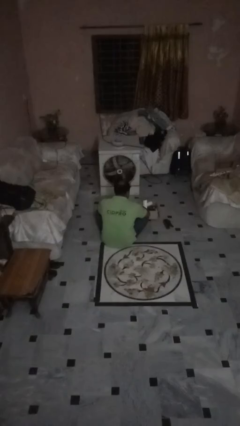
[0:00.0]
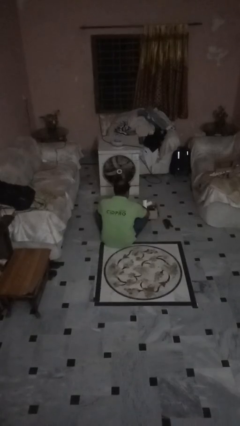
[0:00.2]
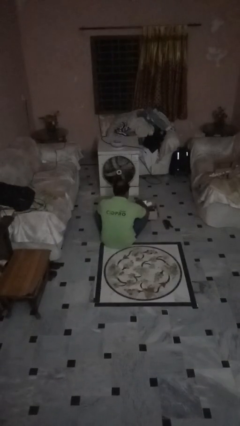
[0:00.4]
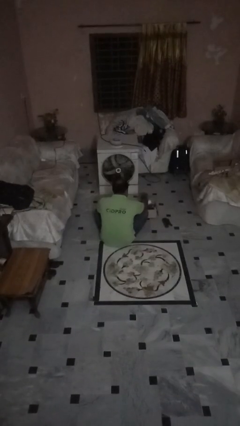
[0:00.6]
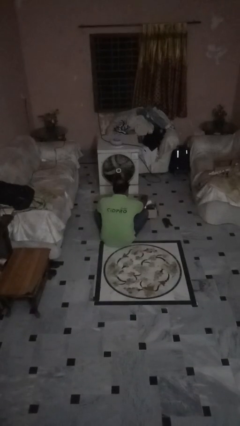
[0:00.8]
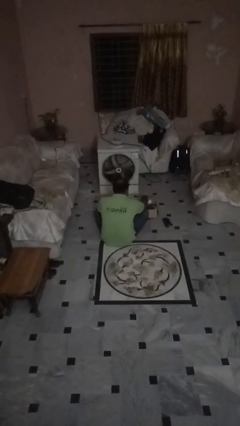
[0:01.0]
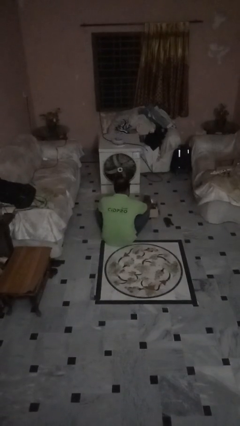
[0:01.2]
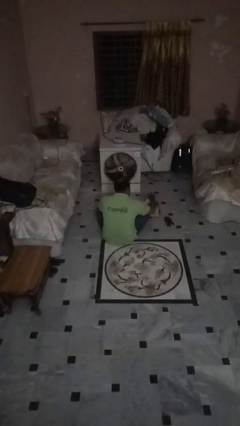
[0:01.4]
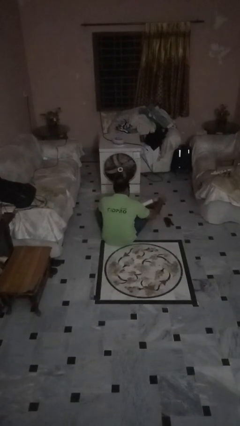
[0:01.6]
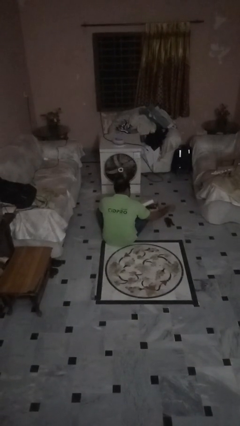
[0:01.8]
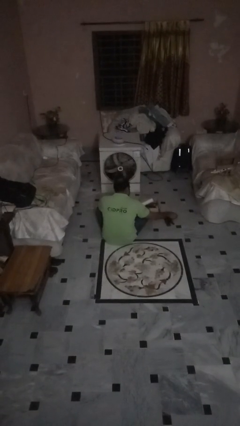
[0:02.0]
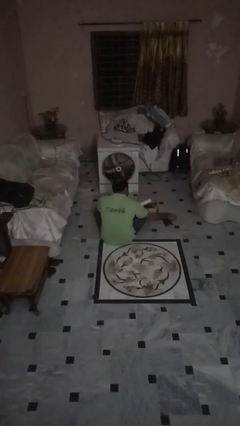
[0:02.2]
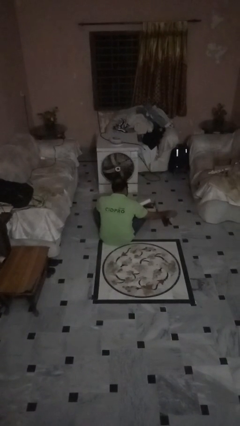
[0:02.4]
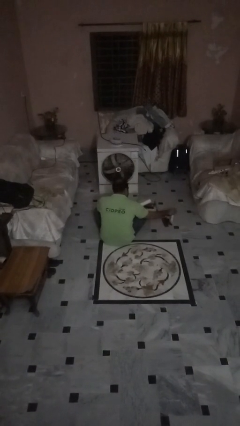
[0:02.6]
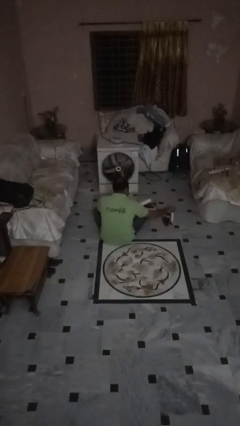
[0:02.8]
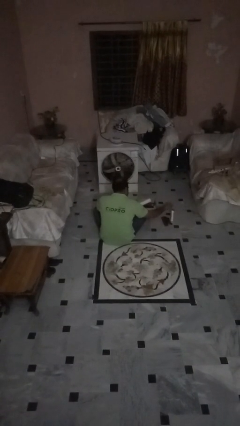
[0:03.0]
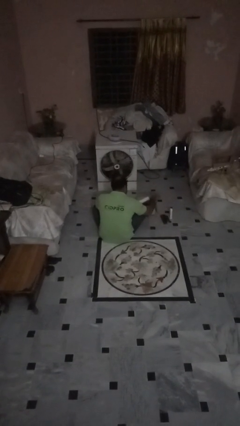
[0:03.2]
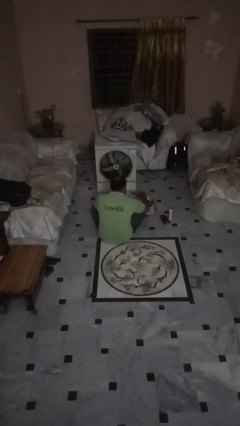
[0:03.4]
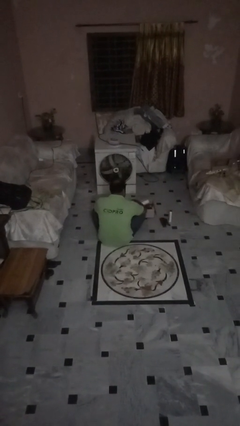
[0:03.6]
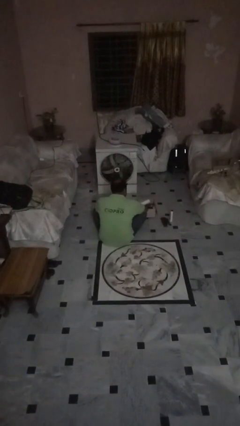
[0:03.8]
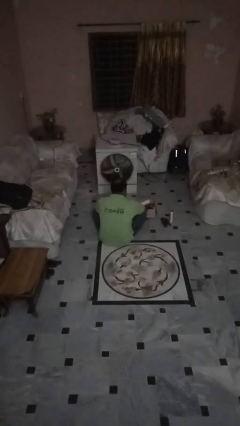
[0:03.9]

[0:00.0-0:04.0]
person unloads box onto floor

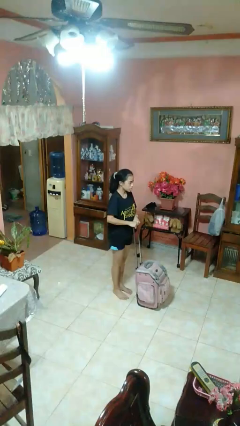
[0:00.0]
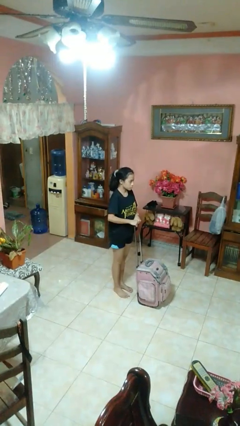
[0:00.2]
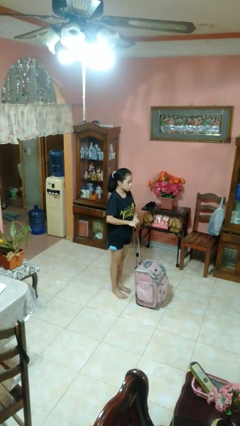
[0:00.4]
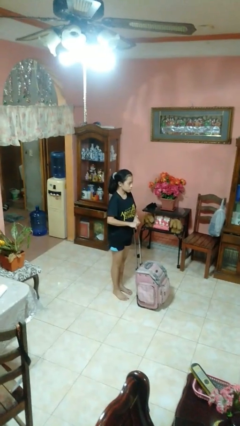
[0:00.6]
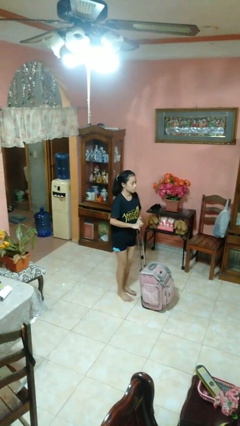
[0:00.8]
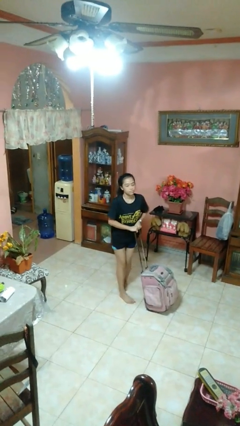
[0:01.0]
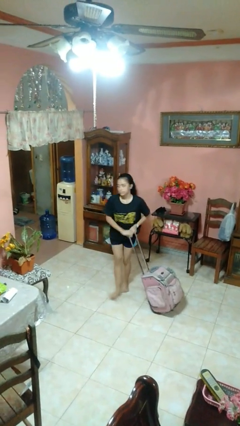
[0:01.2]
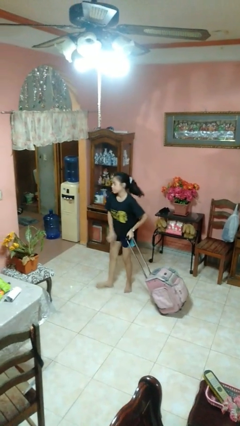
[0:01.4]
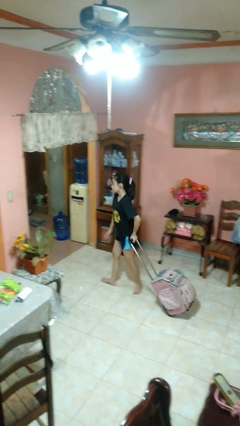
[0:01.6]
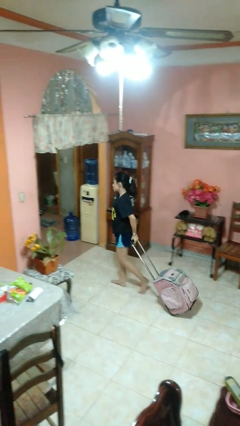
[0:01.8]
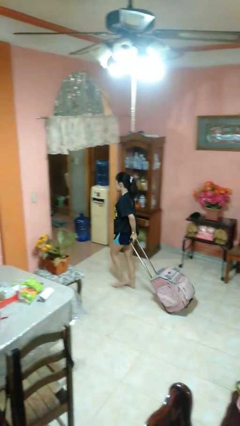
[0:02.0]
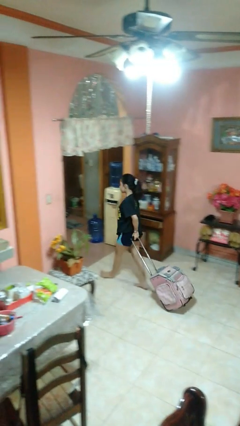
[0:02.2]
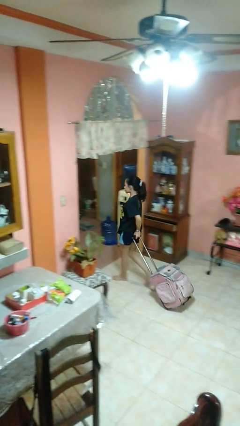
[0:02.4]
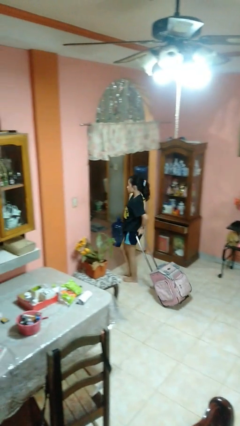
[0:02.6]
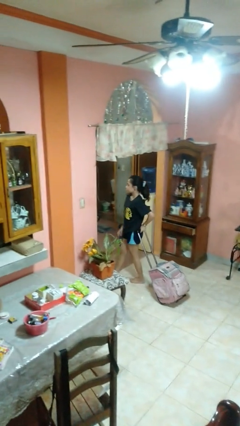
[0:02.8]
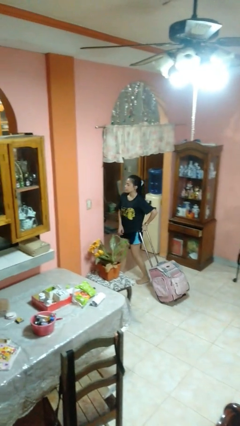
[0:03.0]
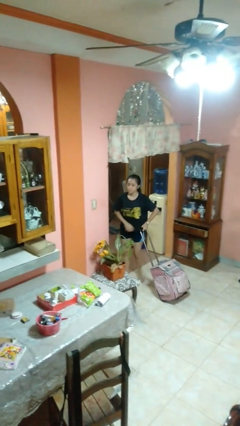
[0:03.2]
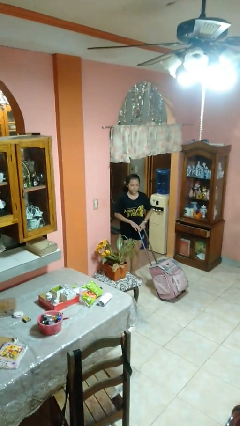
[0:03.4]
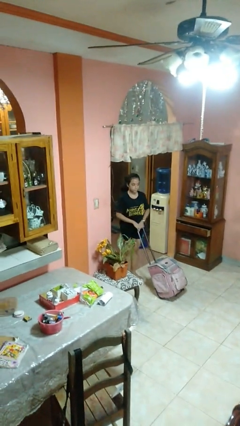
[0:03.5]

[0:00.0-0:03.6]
person pulls wheeled cart

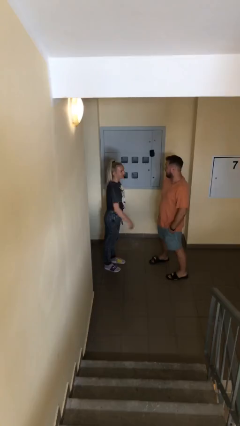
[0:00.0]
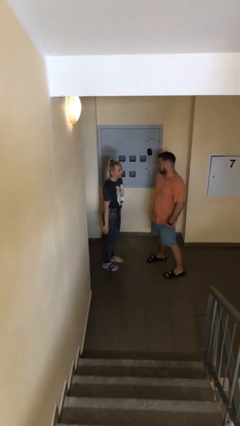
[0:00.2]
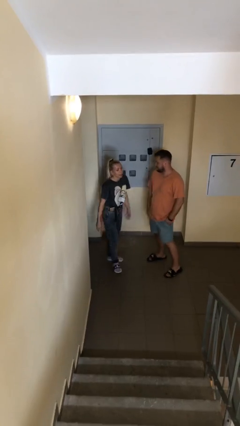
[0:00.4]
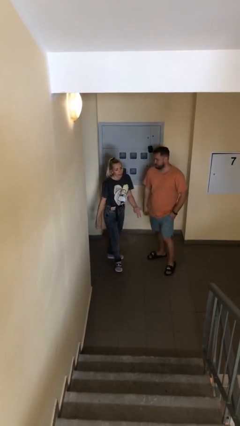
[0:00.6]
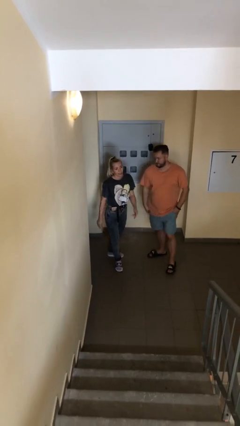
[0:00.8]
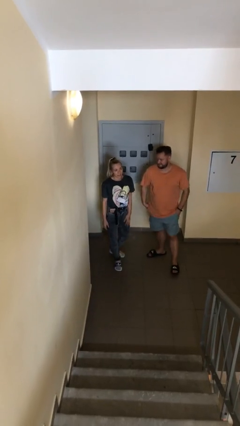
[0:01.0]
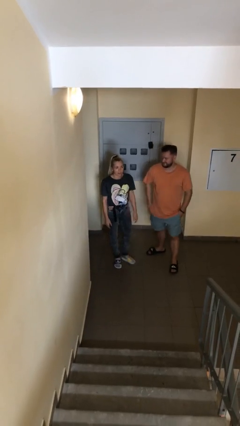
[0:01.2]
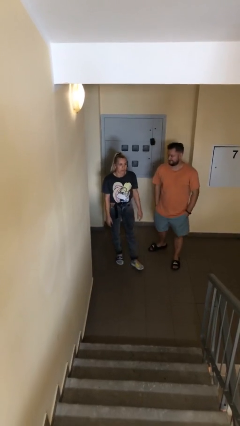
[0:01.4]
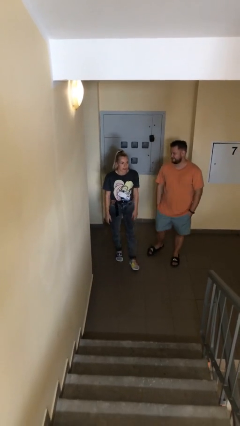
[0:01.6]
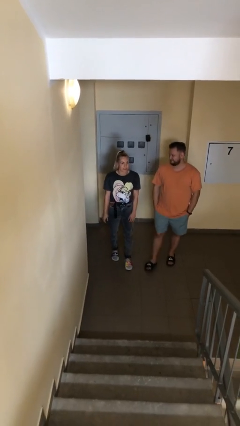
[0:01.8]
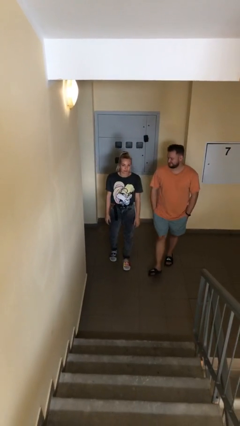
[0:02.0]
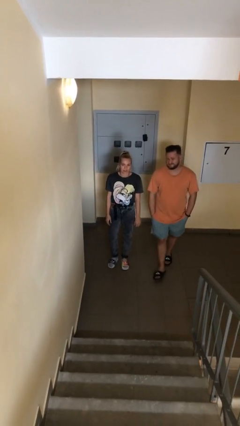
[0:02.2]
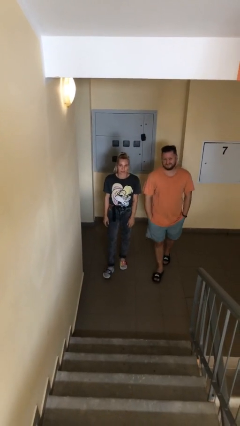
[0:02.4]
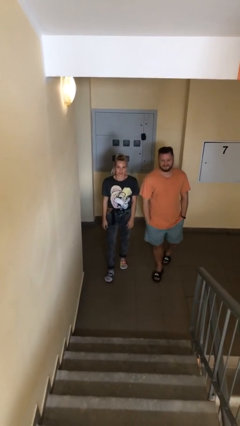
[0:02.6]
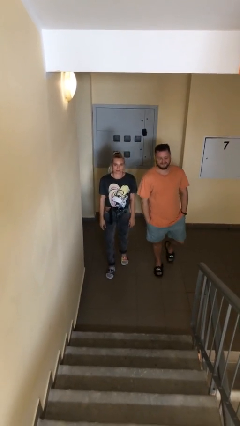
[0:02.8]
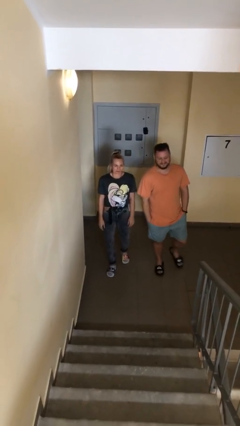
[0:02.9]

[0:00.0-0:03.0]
person talks to person

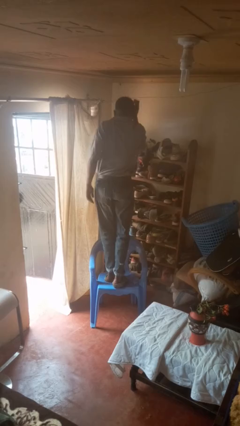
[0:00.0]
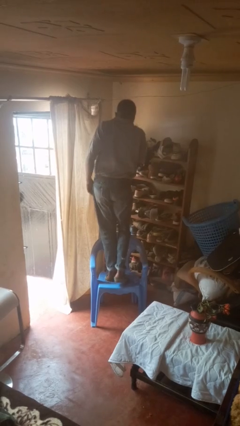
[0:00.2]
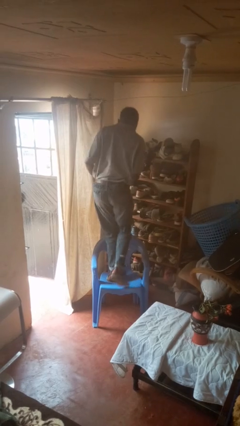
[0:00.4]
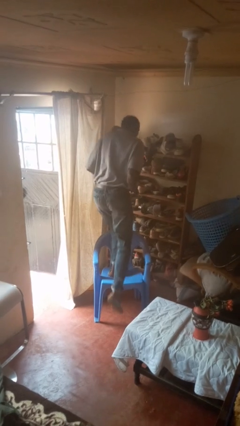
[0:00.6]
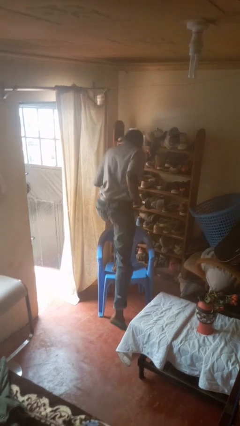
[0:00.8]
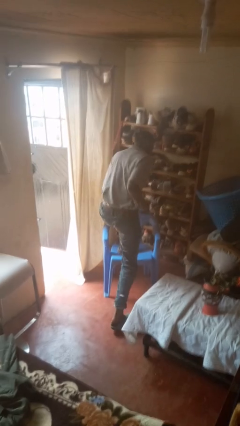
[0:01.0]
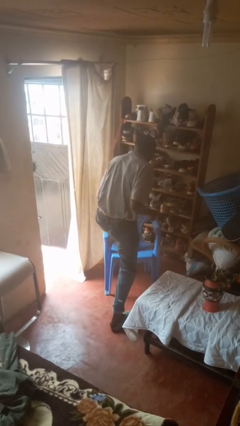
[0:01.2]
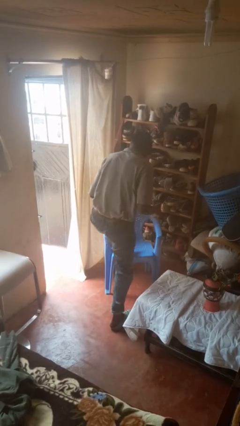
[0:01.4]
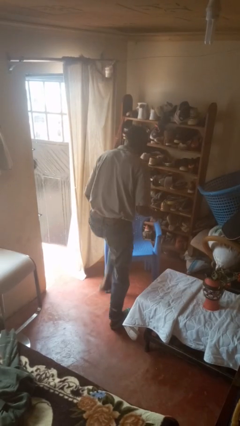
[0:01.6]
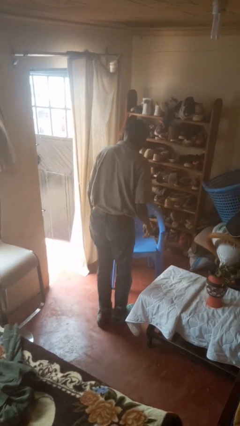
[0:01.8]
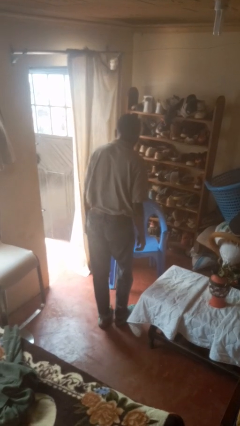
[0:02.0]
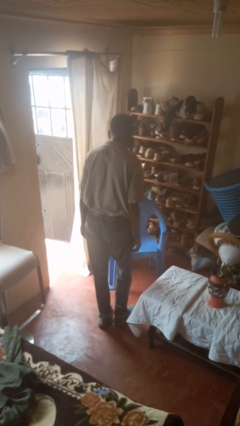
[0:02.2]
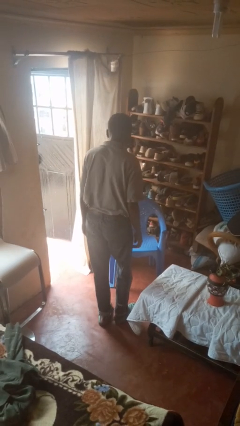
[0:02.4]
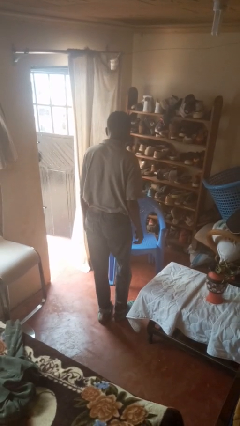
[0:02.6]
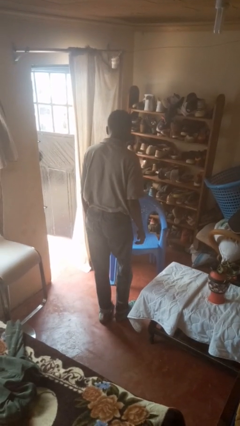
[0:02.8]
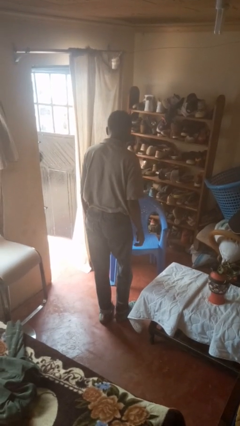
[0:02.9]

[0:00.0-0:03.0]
person climbs off chair

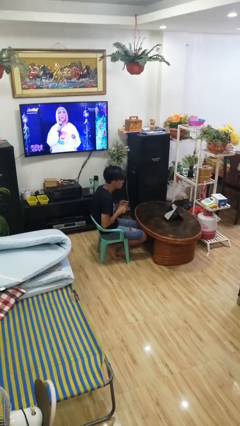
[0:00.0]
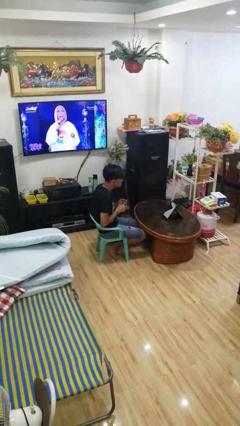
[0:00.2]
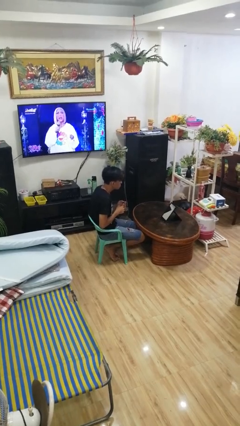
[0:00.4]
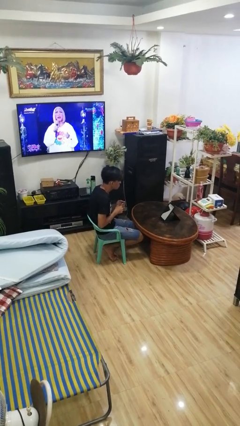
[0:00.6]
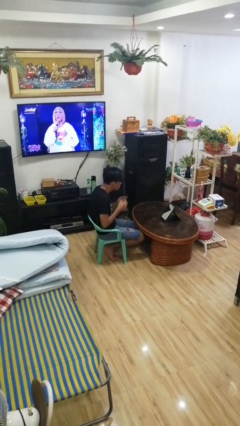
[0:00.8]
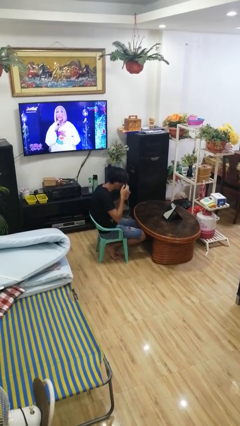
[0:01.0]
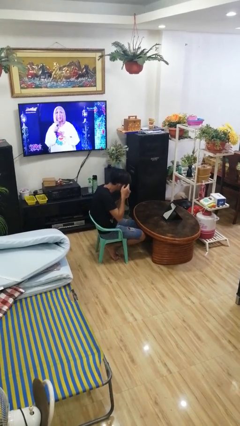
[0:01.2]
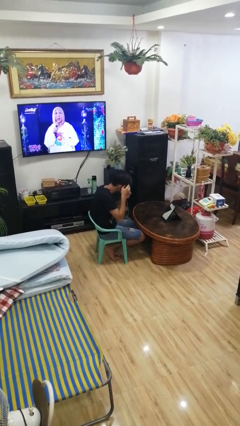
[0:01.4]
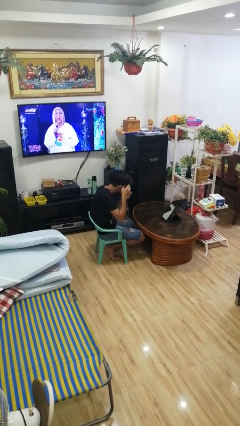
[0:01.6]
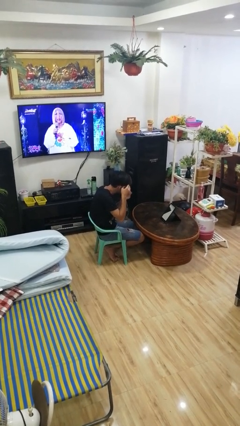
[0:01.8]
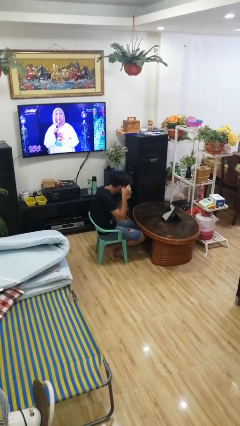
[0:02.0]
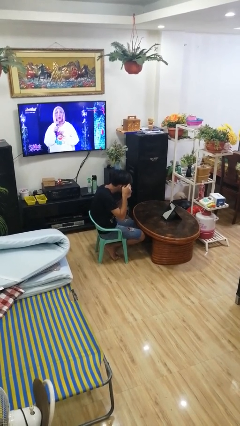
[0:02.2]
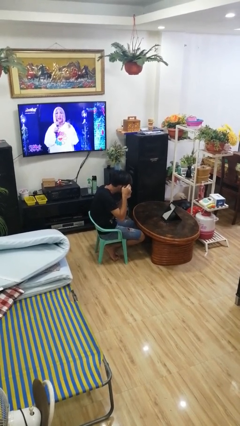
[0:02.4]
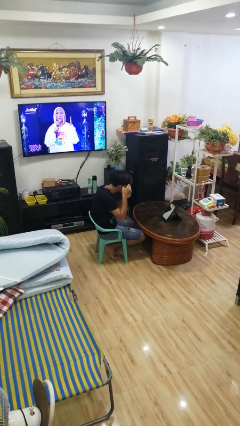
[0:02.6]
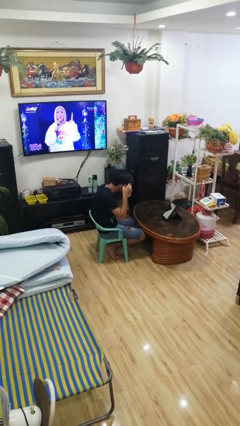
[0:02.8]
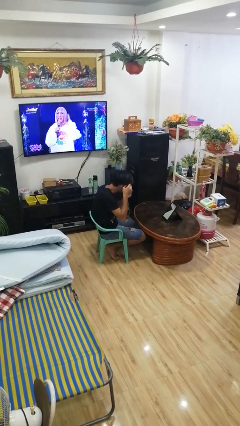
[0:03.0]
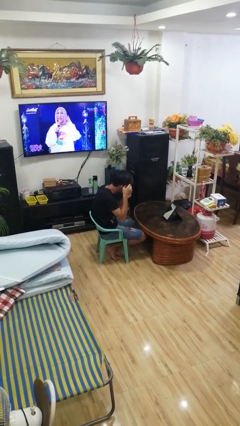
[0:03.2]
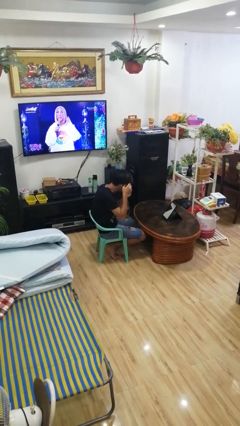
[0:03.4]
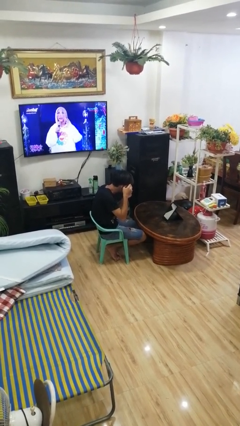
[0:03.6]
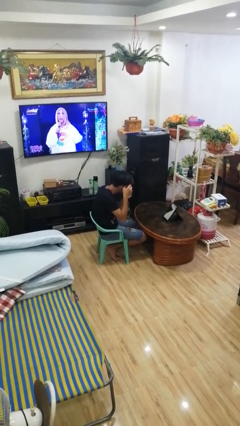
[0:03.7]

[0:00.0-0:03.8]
person applies eye makeup

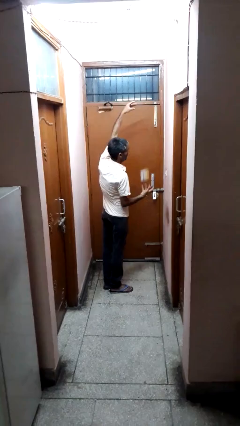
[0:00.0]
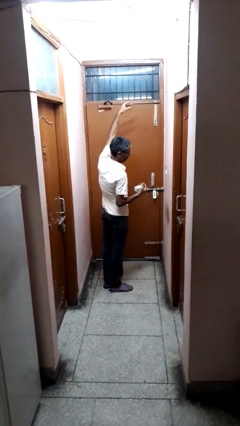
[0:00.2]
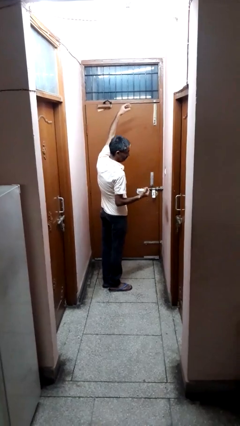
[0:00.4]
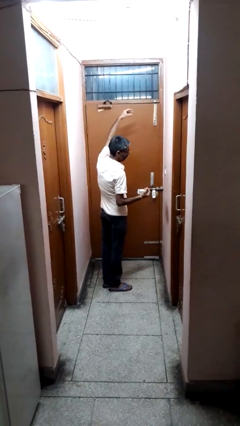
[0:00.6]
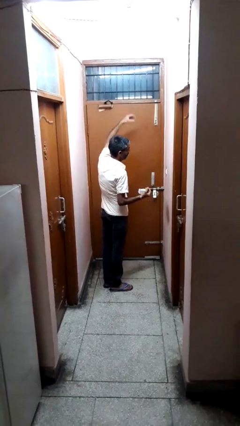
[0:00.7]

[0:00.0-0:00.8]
person catches dropped object
